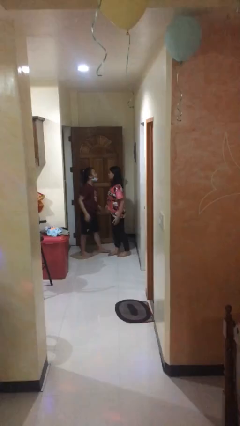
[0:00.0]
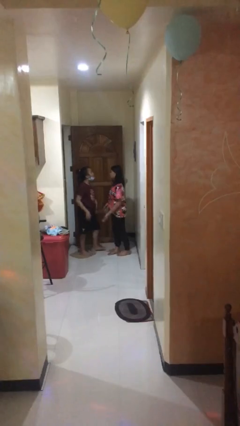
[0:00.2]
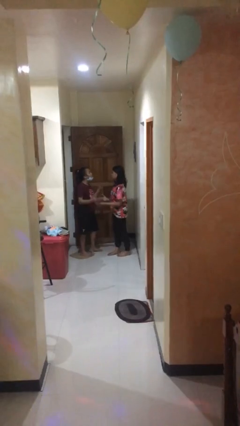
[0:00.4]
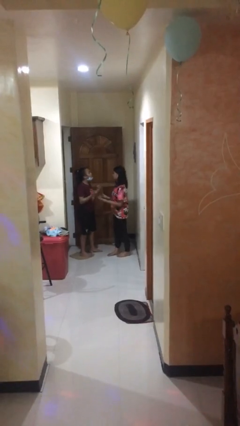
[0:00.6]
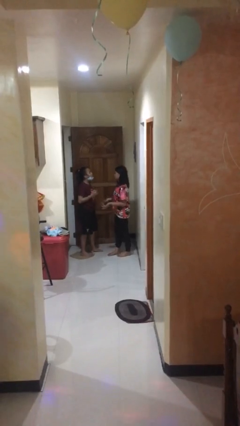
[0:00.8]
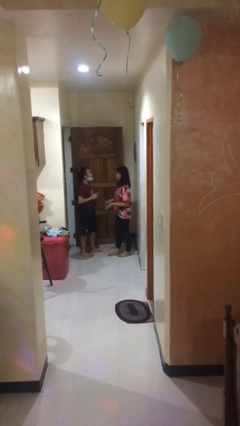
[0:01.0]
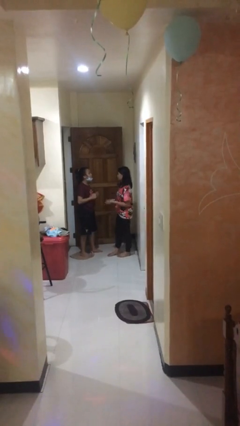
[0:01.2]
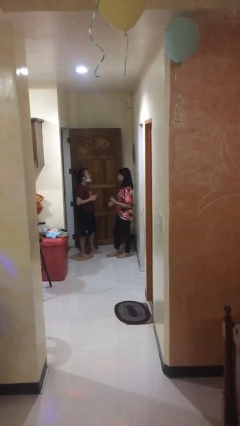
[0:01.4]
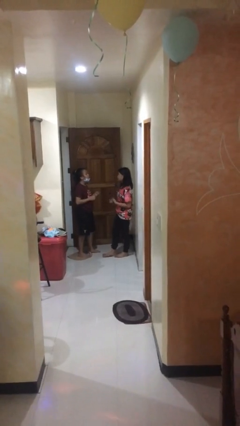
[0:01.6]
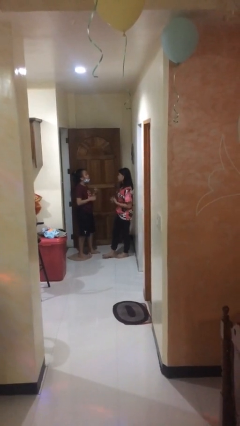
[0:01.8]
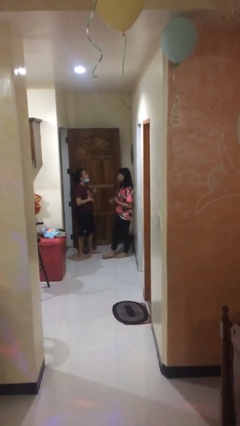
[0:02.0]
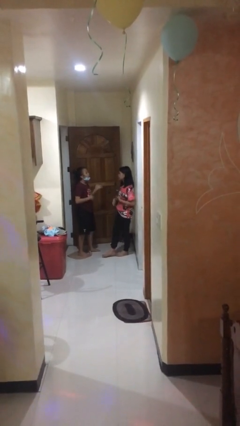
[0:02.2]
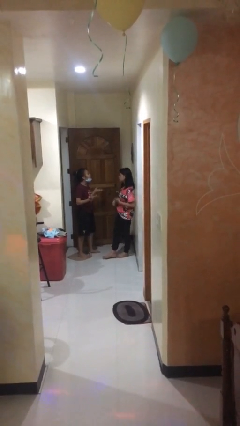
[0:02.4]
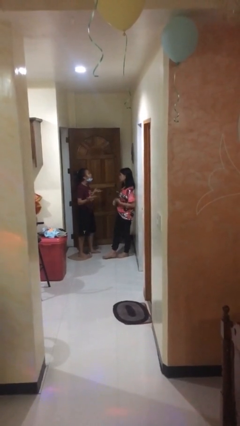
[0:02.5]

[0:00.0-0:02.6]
person talks to person

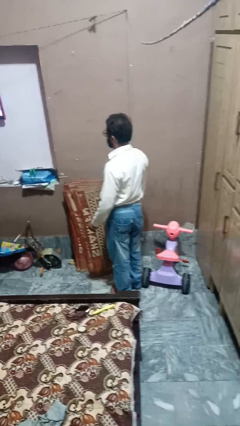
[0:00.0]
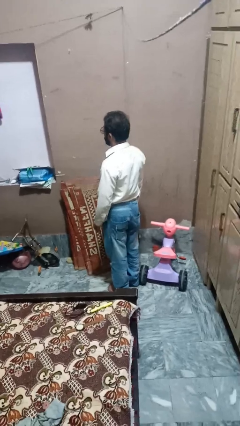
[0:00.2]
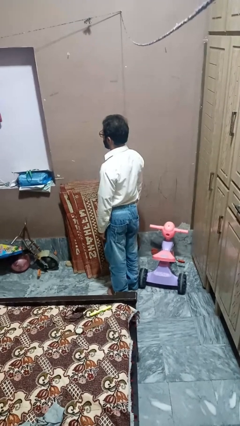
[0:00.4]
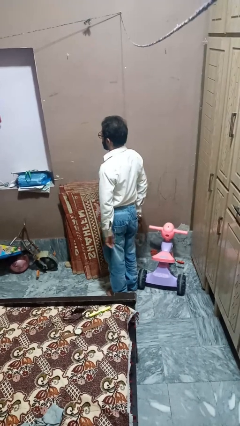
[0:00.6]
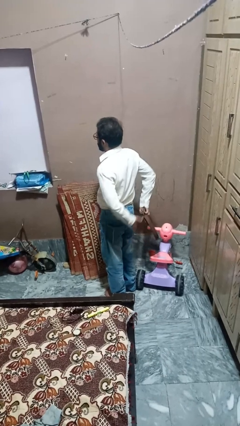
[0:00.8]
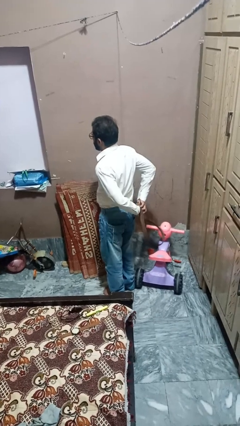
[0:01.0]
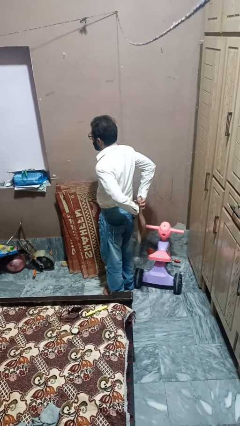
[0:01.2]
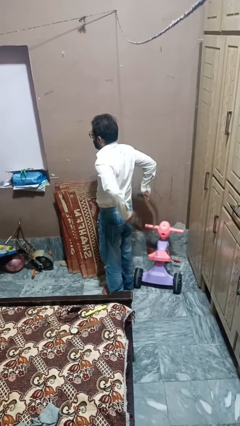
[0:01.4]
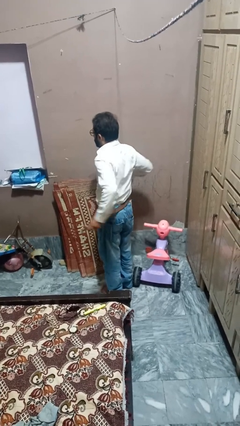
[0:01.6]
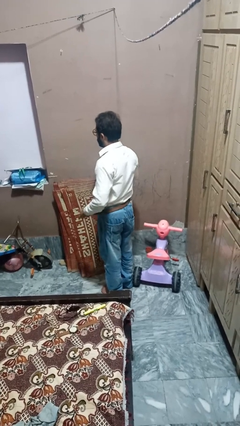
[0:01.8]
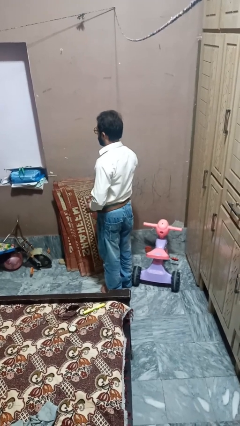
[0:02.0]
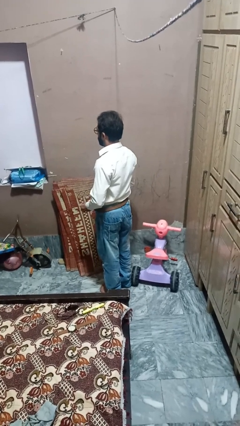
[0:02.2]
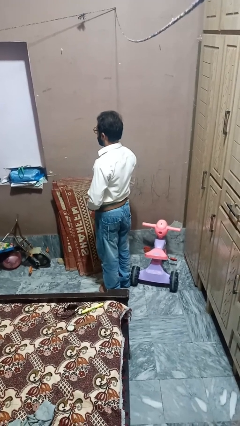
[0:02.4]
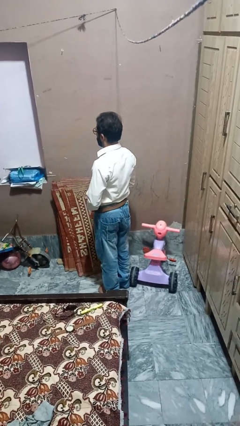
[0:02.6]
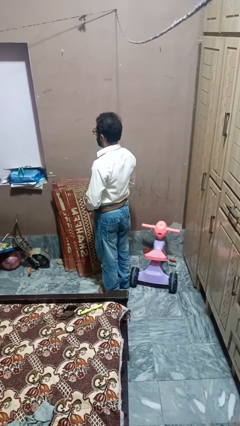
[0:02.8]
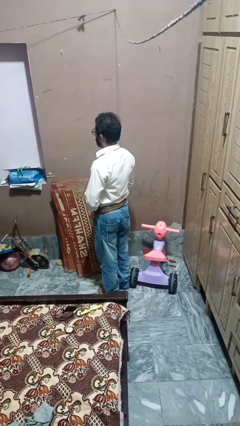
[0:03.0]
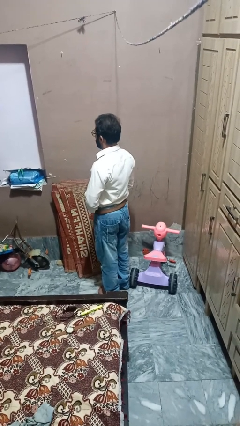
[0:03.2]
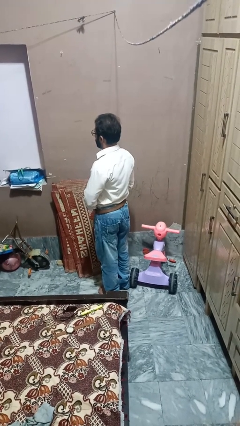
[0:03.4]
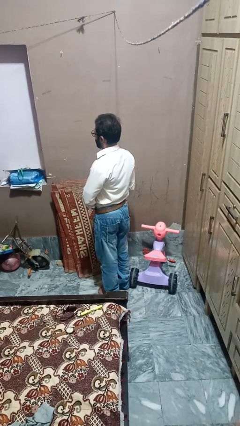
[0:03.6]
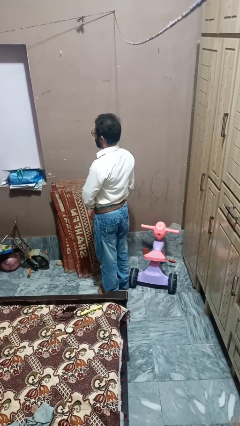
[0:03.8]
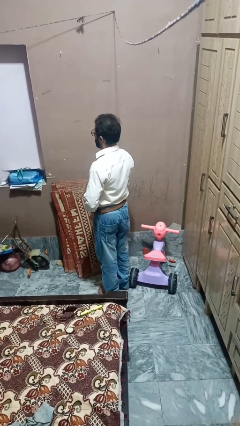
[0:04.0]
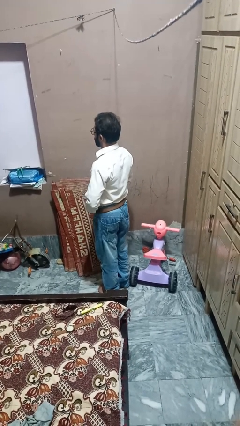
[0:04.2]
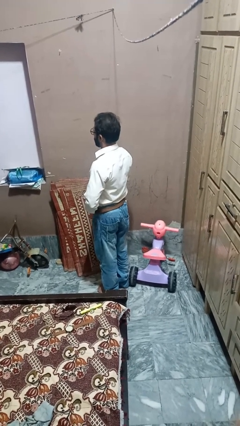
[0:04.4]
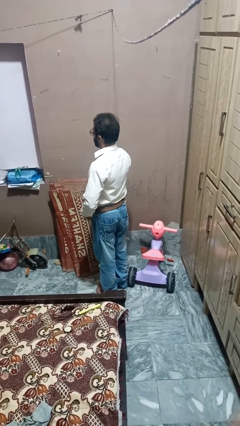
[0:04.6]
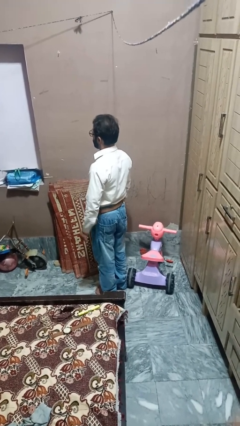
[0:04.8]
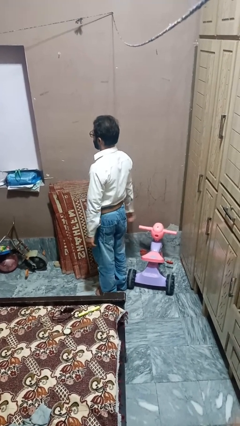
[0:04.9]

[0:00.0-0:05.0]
person puts on belt

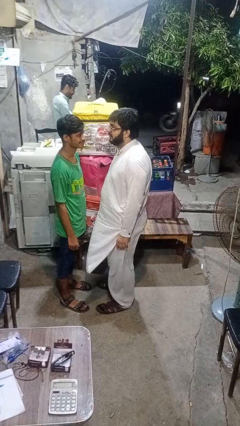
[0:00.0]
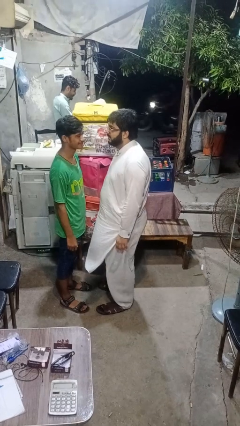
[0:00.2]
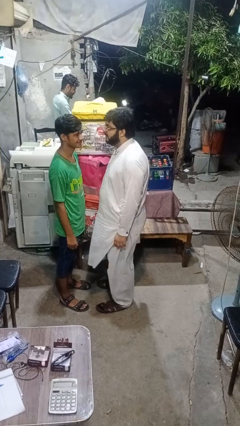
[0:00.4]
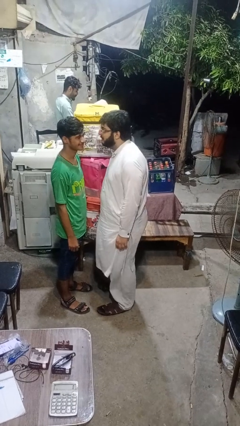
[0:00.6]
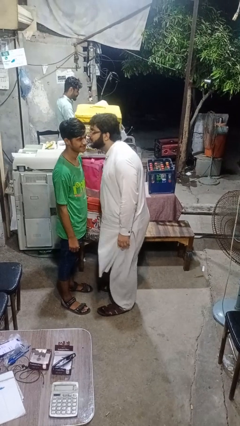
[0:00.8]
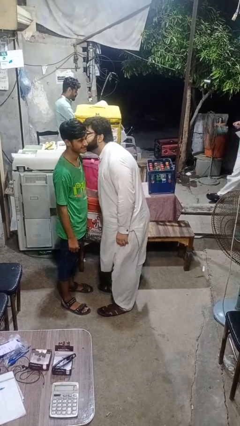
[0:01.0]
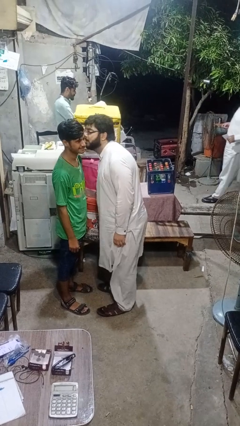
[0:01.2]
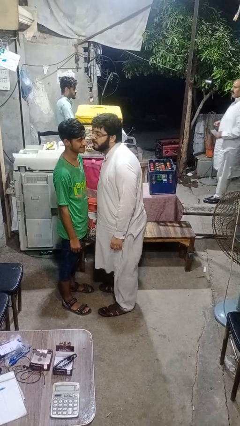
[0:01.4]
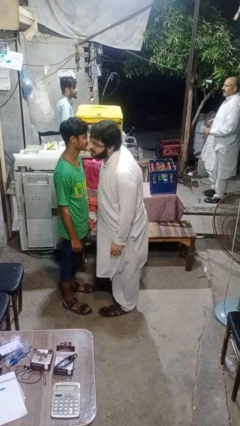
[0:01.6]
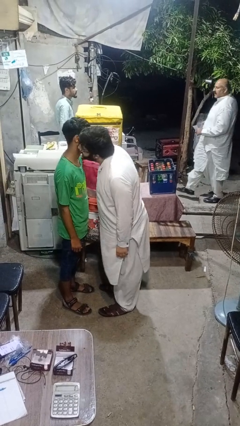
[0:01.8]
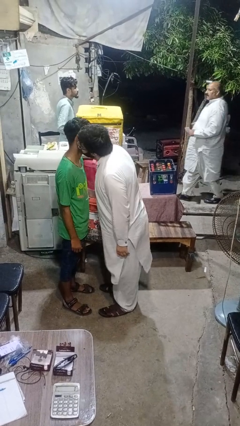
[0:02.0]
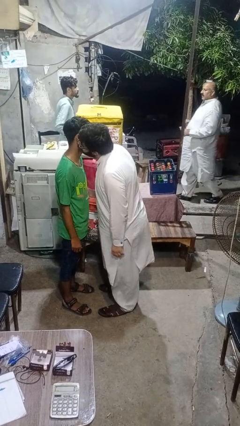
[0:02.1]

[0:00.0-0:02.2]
person kisses cheek of person

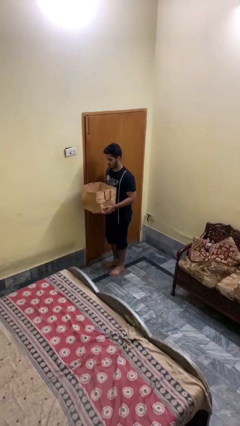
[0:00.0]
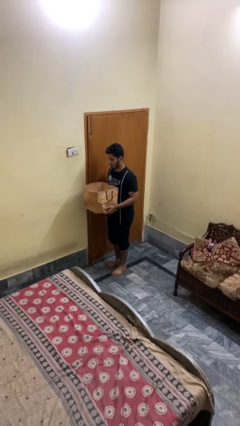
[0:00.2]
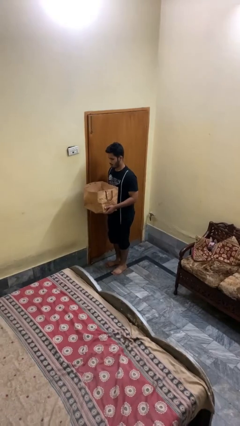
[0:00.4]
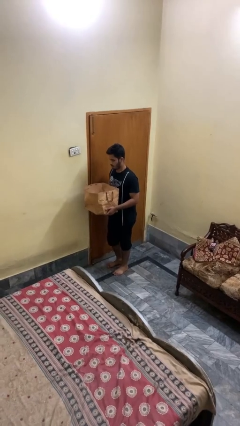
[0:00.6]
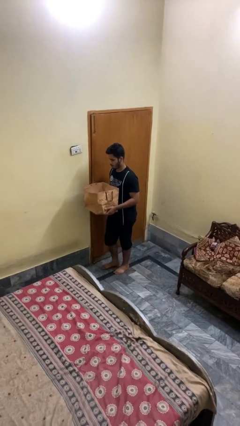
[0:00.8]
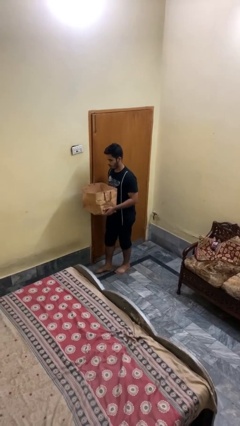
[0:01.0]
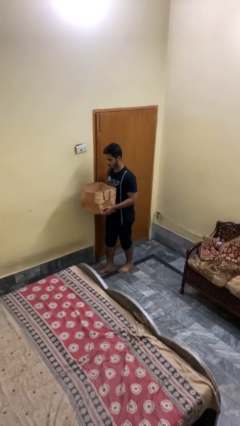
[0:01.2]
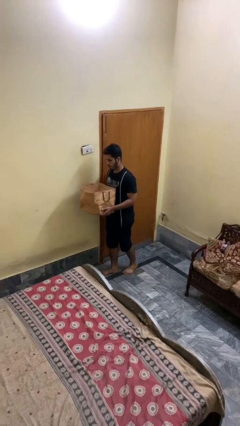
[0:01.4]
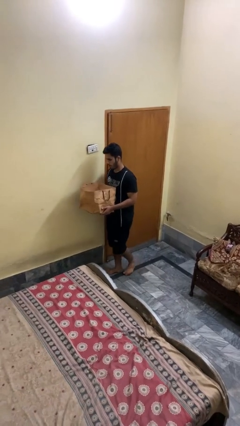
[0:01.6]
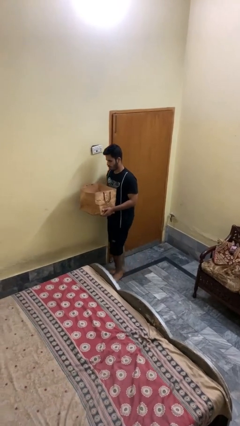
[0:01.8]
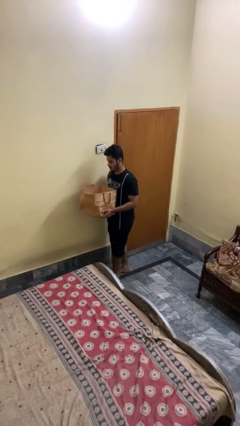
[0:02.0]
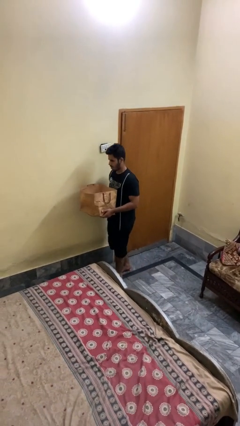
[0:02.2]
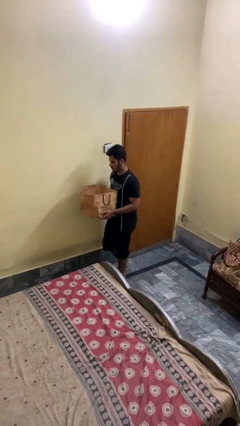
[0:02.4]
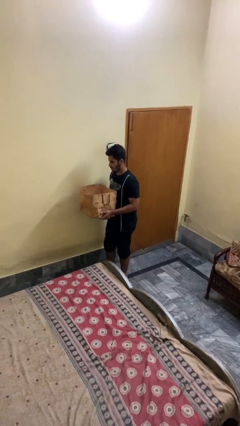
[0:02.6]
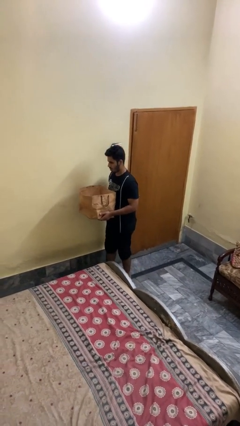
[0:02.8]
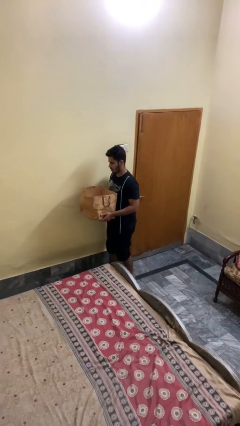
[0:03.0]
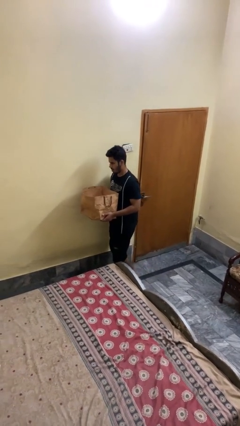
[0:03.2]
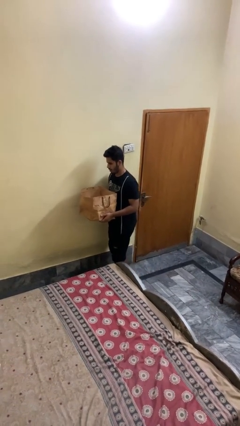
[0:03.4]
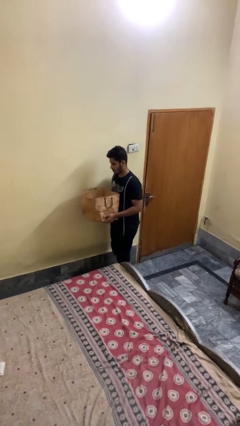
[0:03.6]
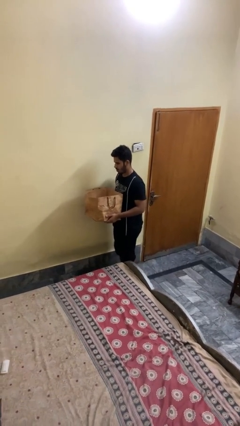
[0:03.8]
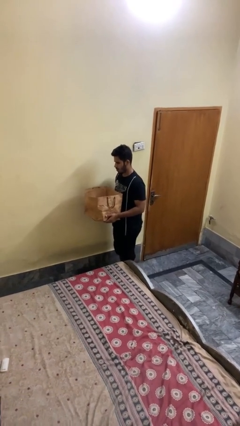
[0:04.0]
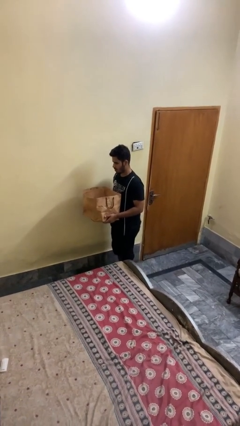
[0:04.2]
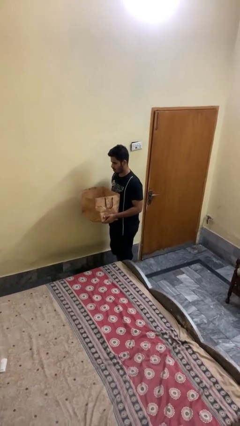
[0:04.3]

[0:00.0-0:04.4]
person carries groceries

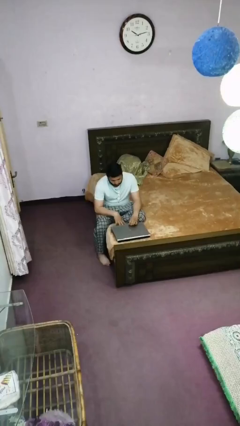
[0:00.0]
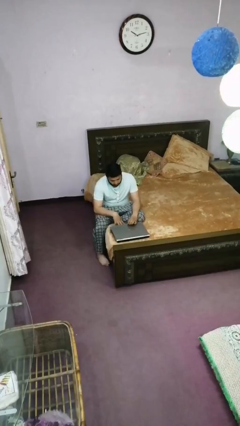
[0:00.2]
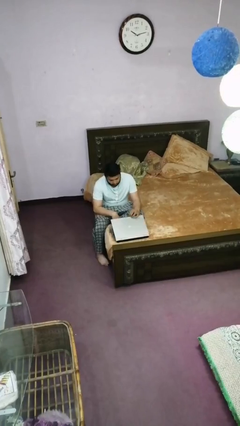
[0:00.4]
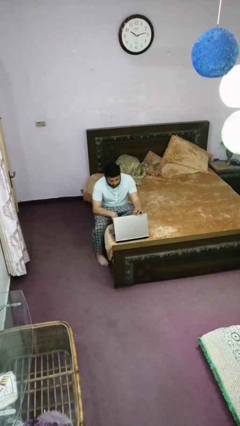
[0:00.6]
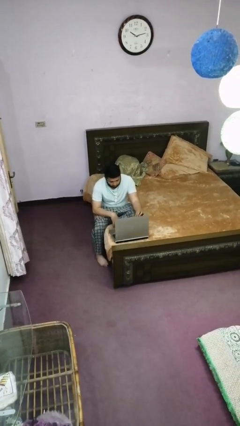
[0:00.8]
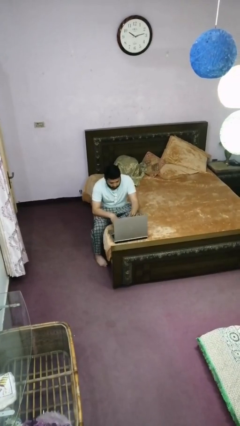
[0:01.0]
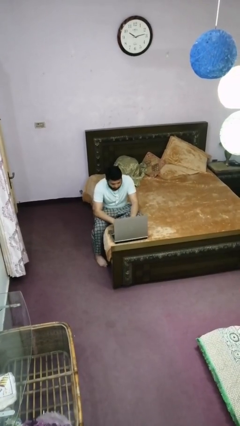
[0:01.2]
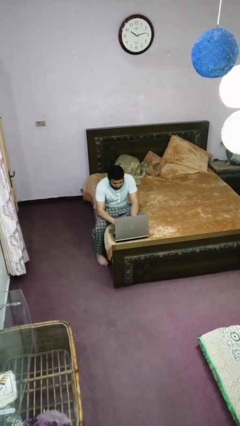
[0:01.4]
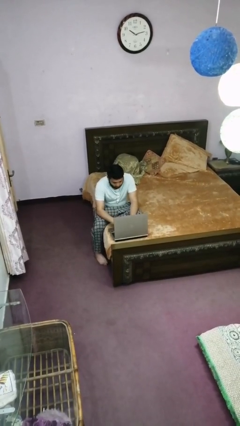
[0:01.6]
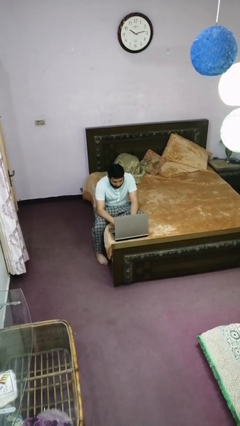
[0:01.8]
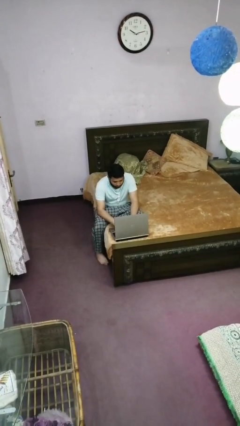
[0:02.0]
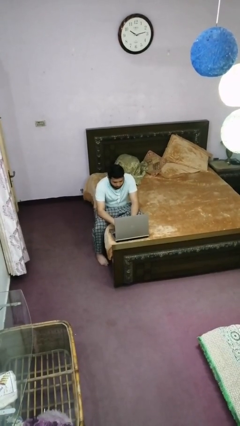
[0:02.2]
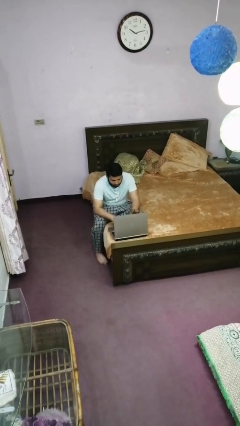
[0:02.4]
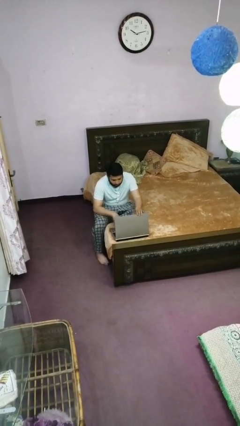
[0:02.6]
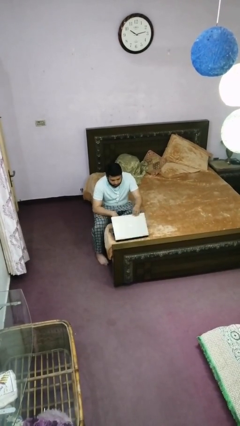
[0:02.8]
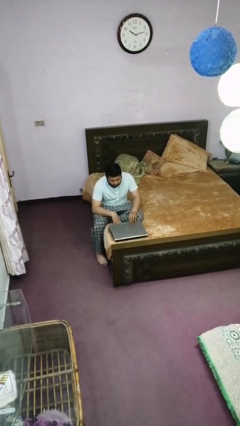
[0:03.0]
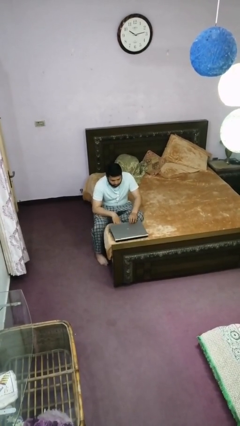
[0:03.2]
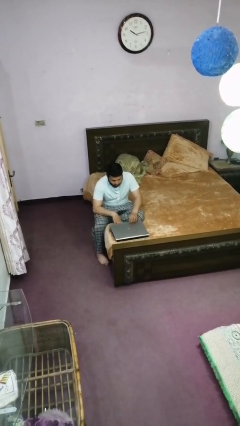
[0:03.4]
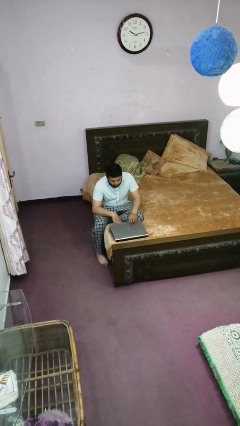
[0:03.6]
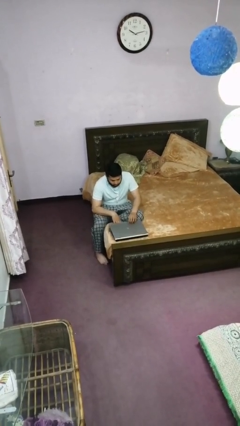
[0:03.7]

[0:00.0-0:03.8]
person interacts with laptop
